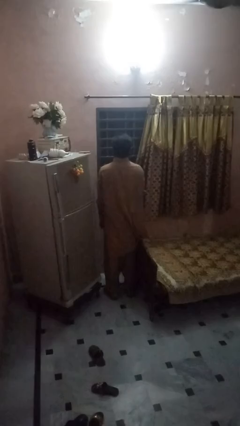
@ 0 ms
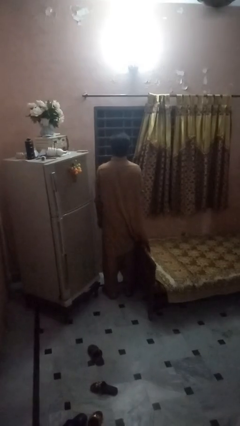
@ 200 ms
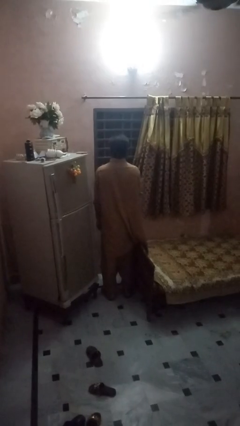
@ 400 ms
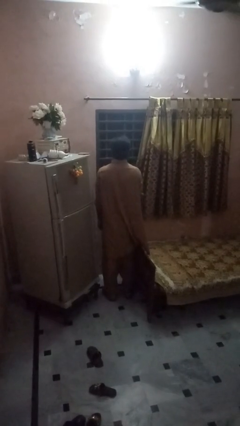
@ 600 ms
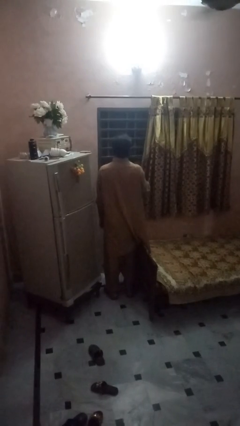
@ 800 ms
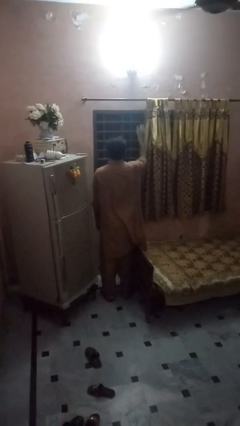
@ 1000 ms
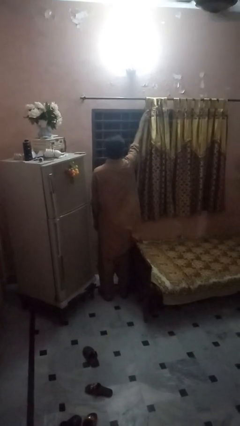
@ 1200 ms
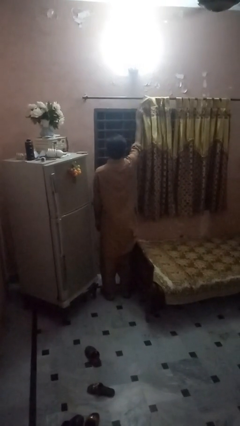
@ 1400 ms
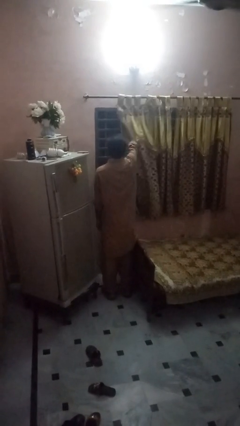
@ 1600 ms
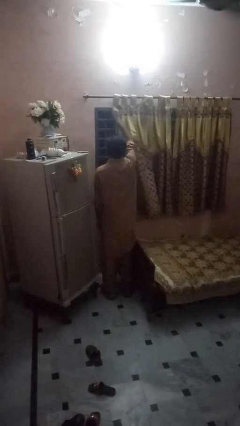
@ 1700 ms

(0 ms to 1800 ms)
person closes curtains

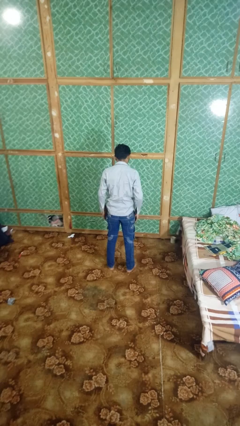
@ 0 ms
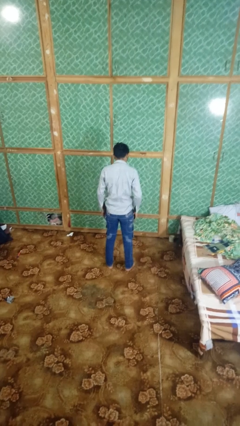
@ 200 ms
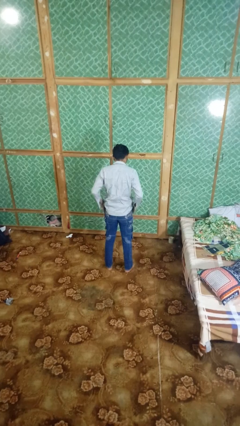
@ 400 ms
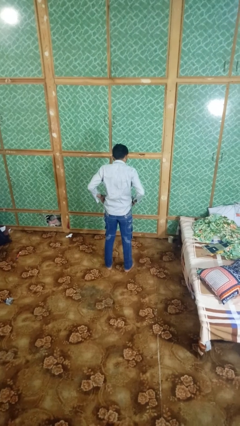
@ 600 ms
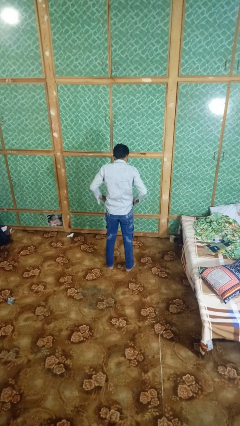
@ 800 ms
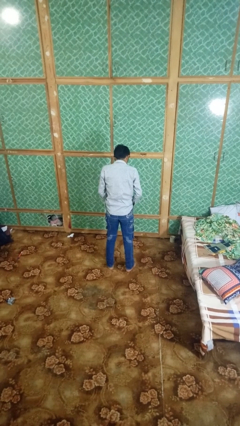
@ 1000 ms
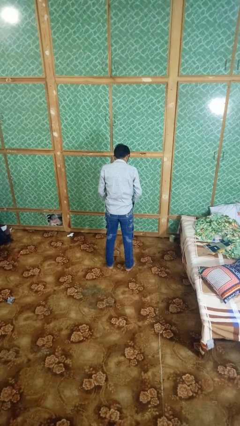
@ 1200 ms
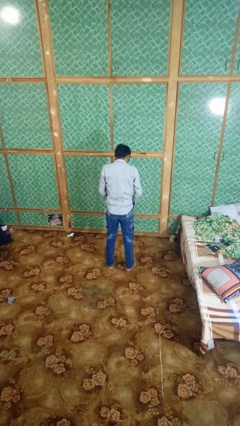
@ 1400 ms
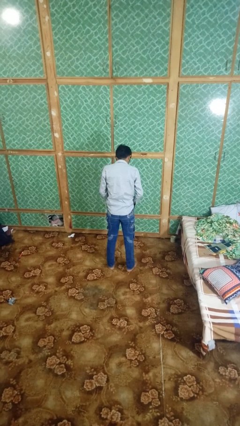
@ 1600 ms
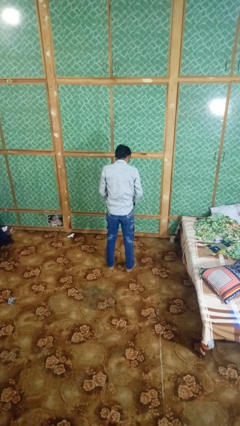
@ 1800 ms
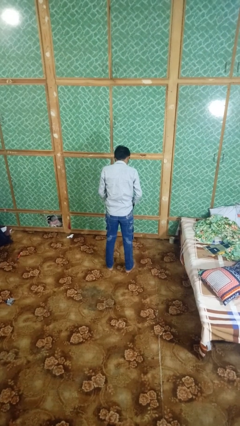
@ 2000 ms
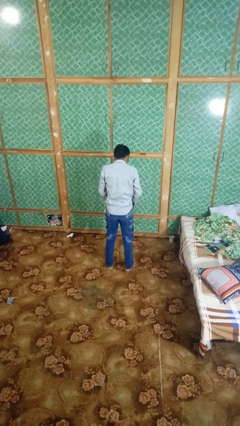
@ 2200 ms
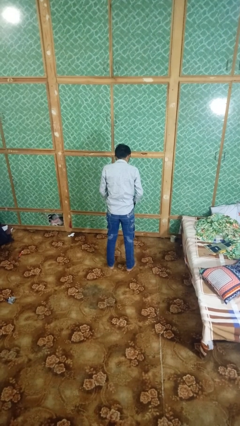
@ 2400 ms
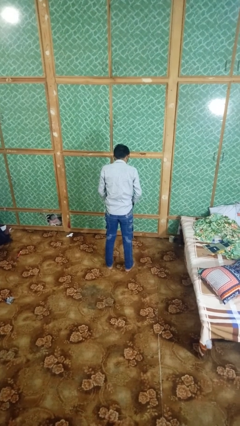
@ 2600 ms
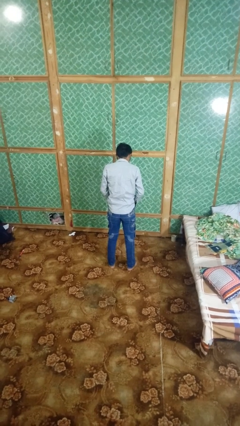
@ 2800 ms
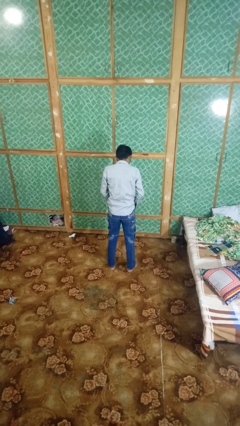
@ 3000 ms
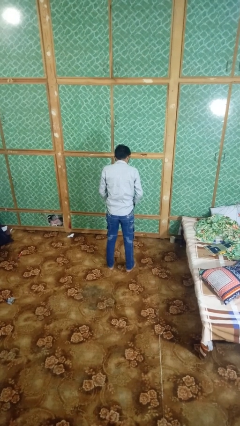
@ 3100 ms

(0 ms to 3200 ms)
person puts hands in back pockets

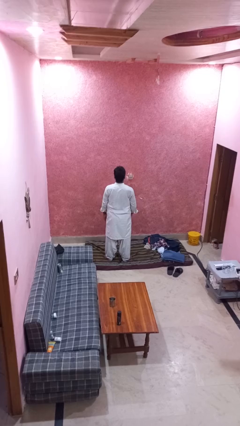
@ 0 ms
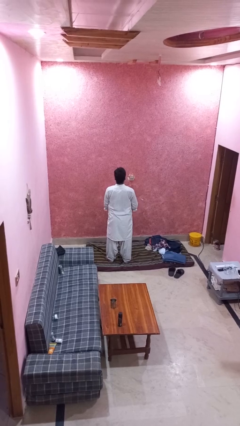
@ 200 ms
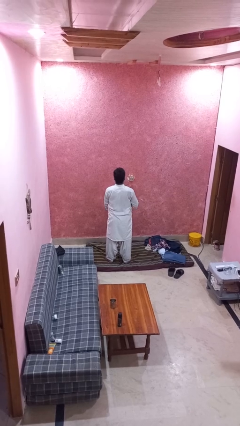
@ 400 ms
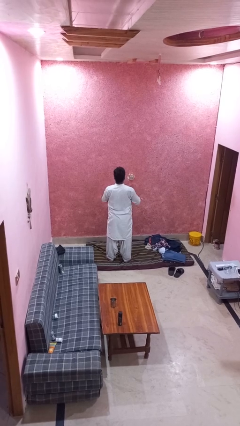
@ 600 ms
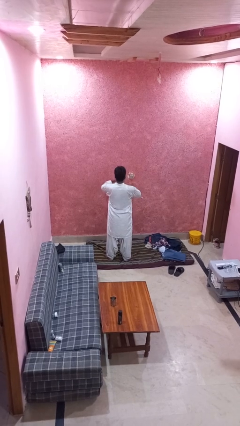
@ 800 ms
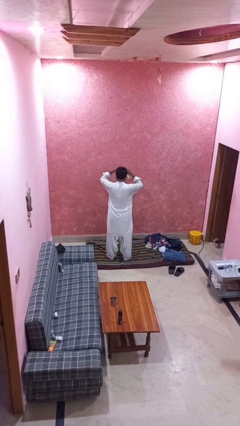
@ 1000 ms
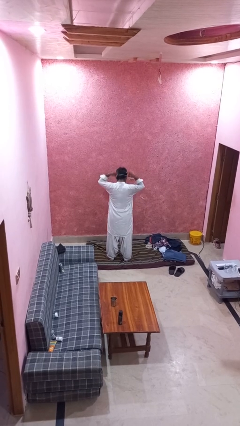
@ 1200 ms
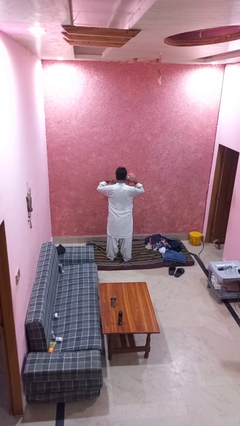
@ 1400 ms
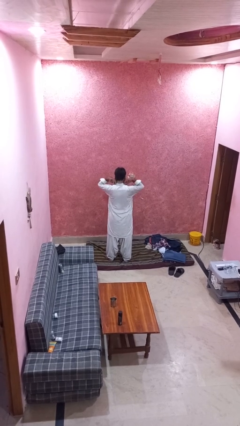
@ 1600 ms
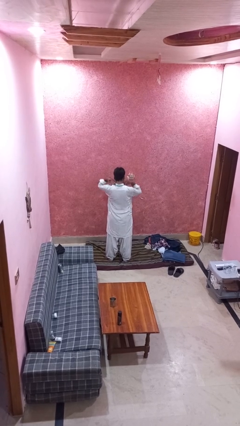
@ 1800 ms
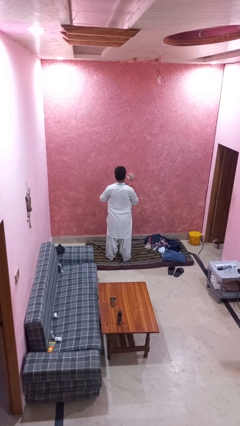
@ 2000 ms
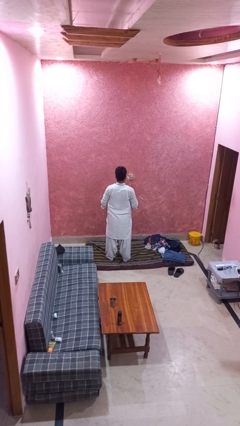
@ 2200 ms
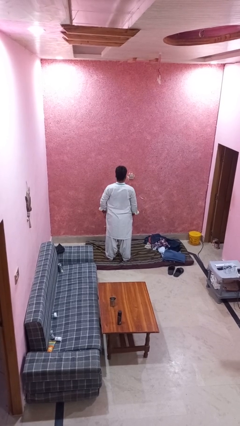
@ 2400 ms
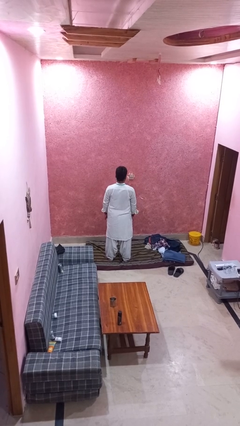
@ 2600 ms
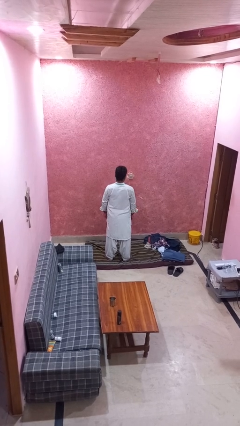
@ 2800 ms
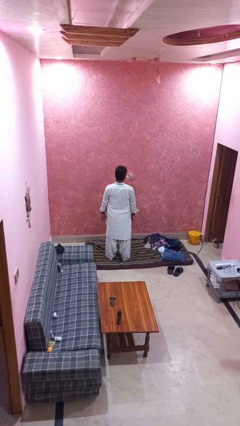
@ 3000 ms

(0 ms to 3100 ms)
person puts on necklace

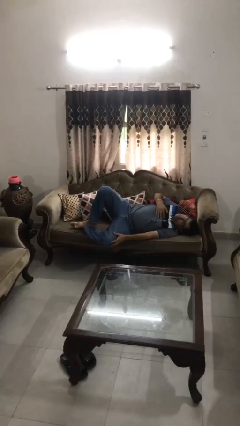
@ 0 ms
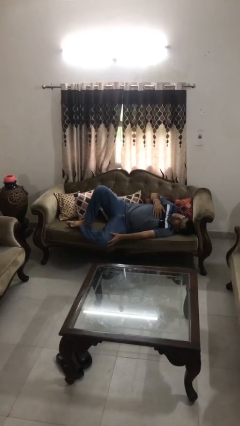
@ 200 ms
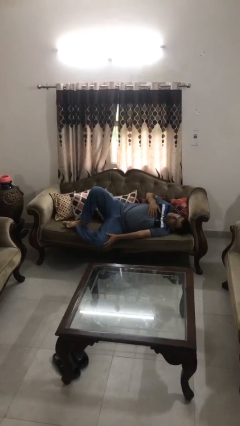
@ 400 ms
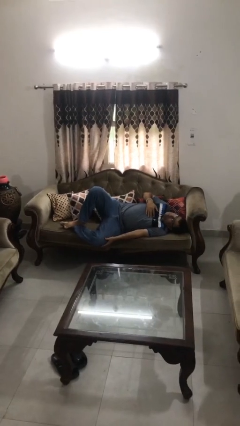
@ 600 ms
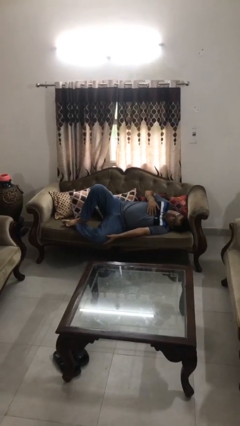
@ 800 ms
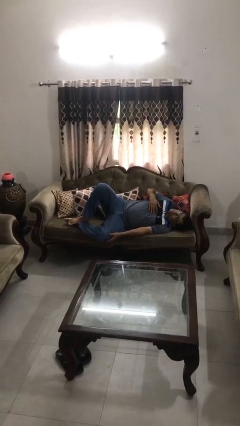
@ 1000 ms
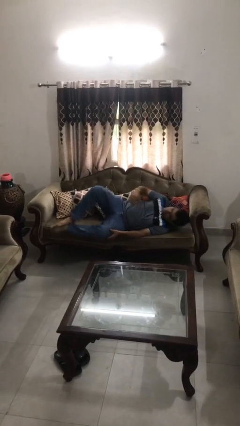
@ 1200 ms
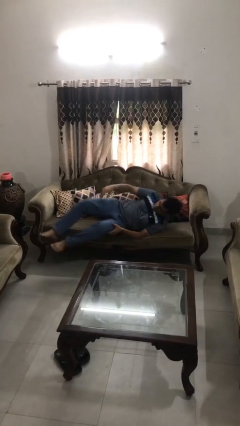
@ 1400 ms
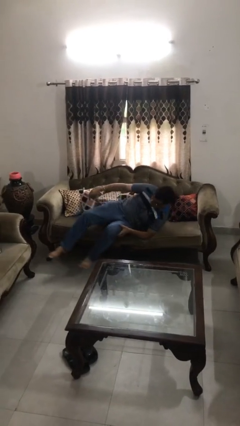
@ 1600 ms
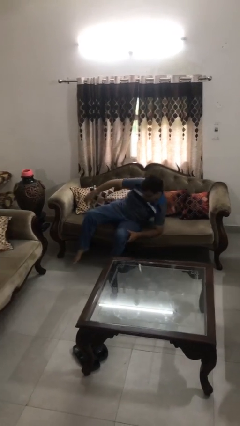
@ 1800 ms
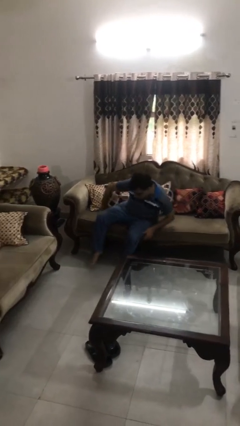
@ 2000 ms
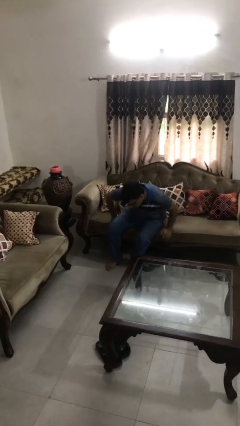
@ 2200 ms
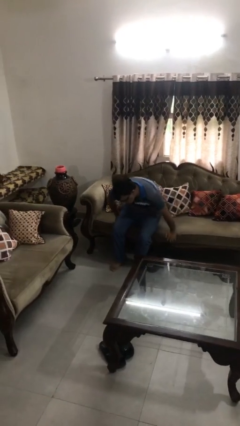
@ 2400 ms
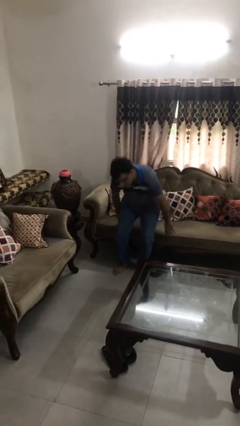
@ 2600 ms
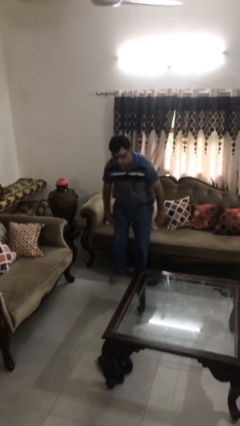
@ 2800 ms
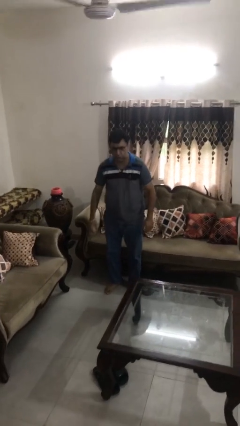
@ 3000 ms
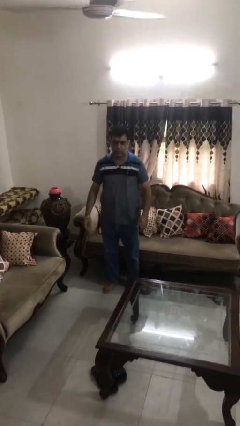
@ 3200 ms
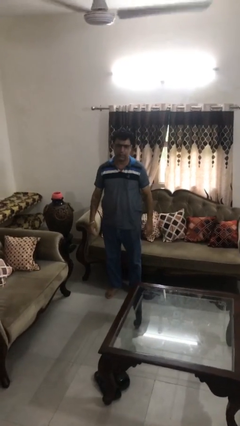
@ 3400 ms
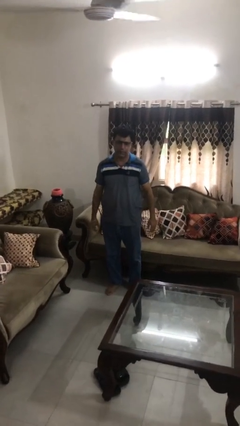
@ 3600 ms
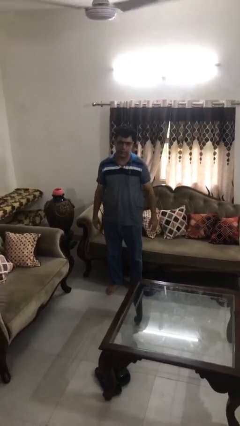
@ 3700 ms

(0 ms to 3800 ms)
person stands up

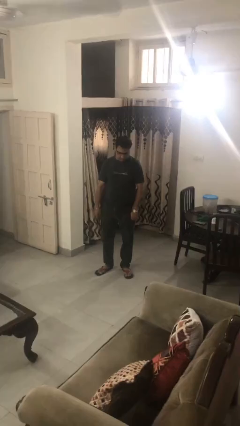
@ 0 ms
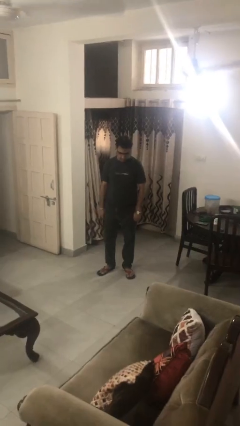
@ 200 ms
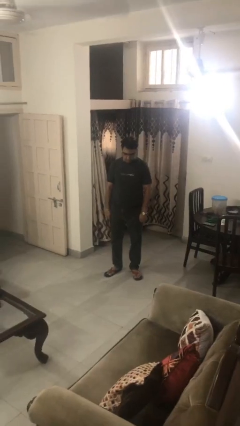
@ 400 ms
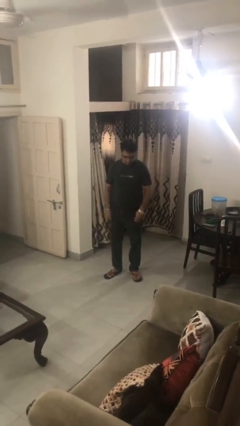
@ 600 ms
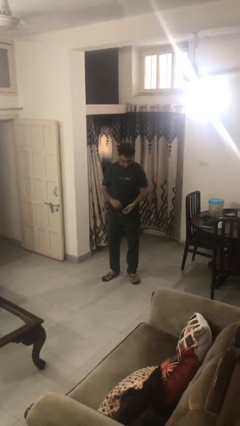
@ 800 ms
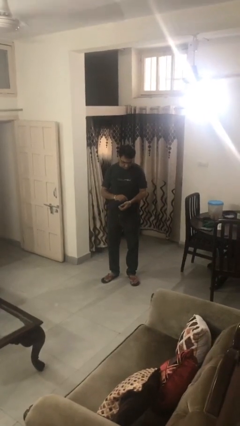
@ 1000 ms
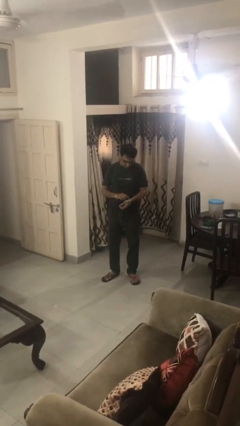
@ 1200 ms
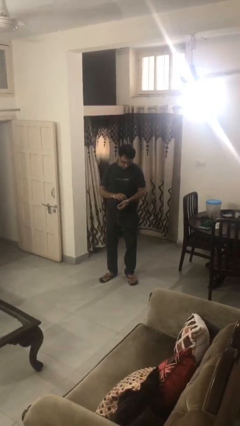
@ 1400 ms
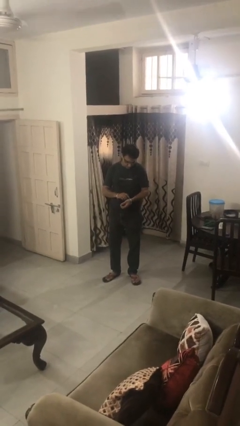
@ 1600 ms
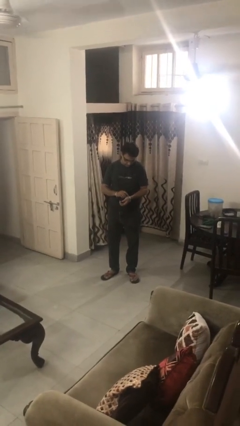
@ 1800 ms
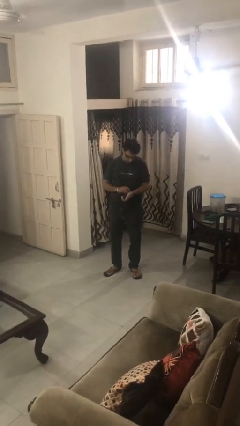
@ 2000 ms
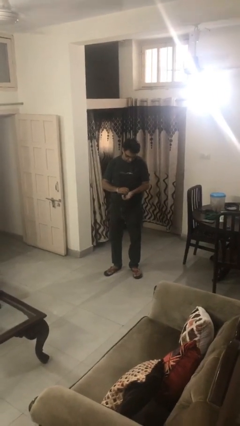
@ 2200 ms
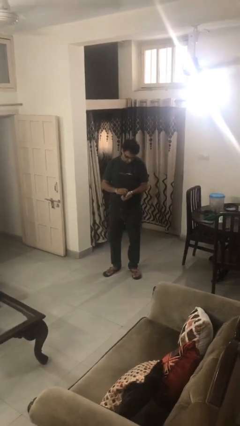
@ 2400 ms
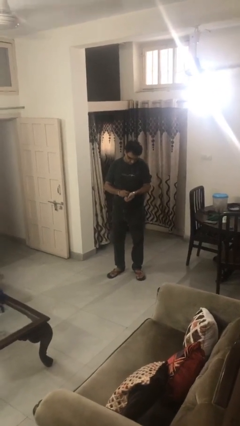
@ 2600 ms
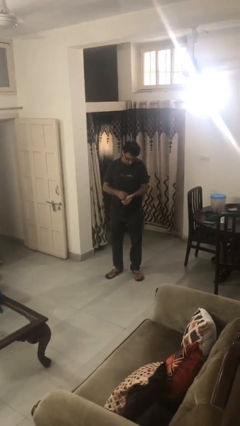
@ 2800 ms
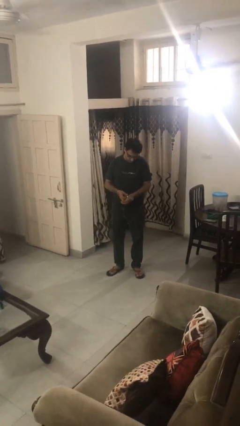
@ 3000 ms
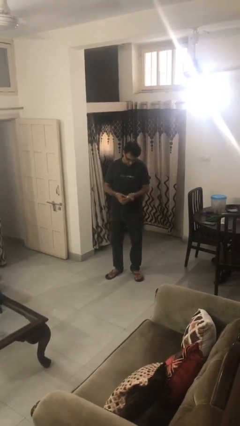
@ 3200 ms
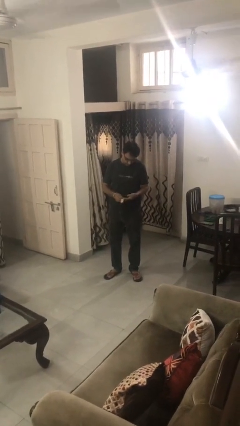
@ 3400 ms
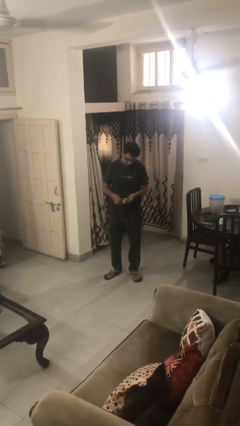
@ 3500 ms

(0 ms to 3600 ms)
person takes off wristwatch

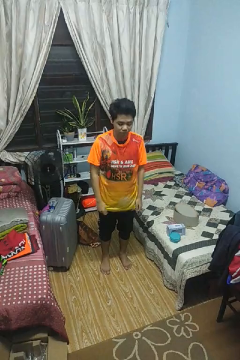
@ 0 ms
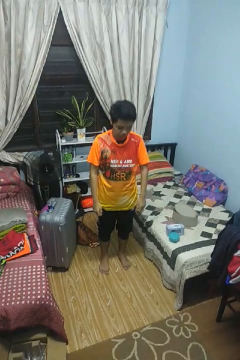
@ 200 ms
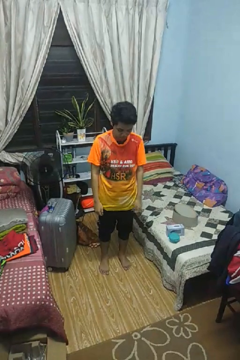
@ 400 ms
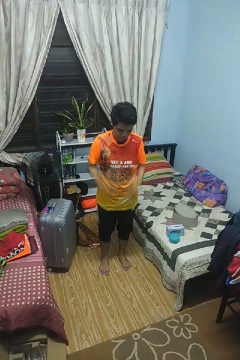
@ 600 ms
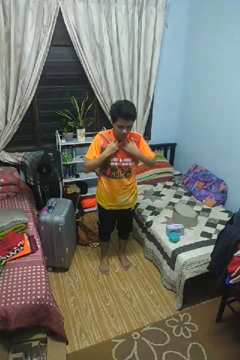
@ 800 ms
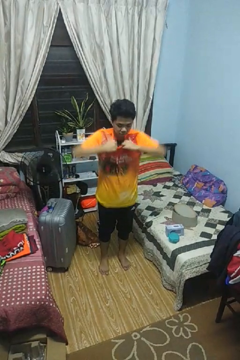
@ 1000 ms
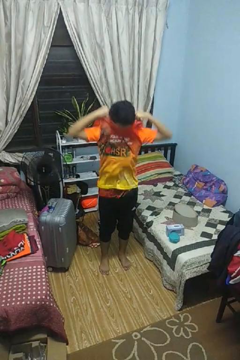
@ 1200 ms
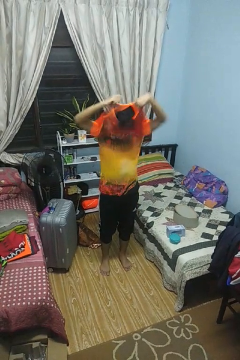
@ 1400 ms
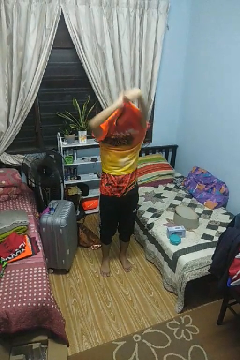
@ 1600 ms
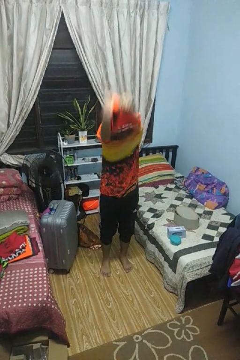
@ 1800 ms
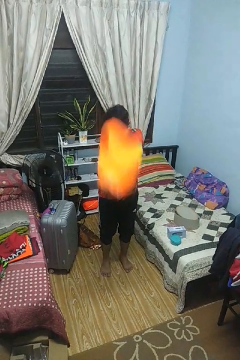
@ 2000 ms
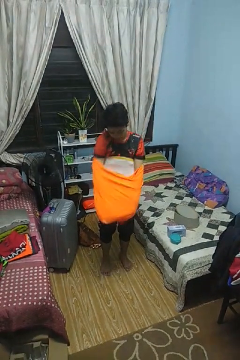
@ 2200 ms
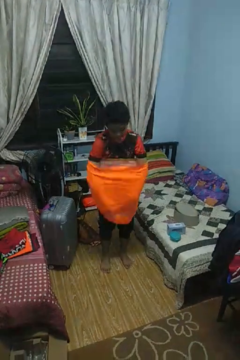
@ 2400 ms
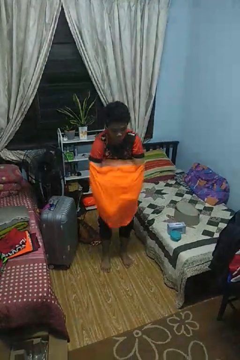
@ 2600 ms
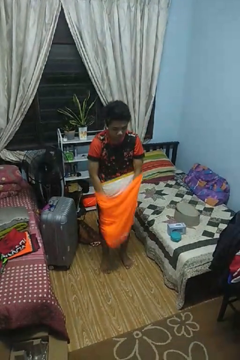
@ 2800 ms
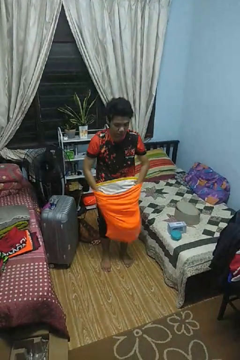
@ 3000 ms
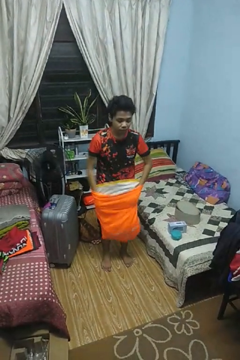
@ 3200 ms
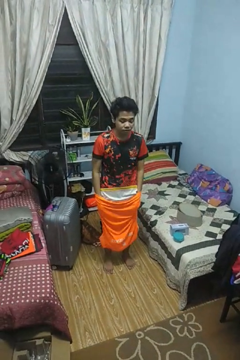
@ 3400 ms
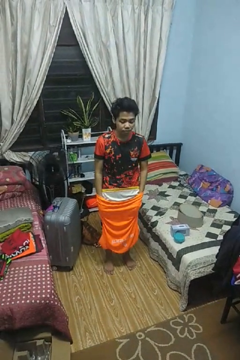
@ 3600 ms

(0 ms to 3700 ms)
person takes off shirt
